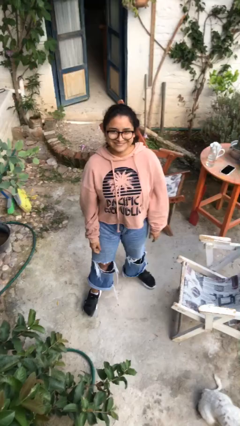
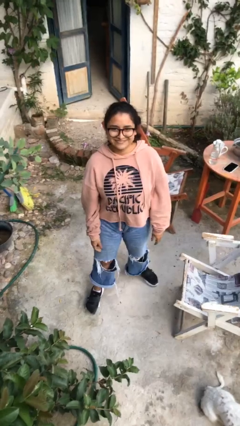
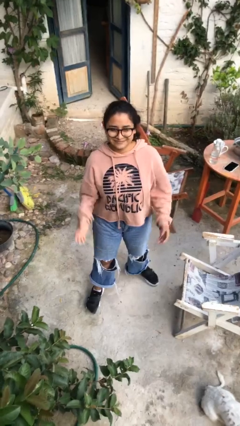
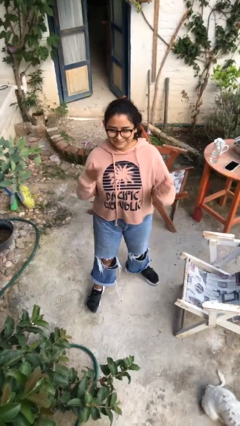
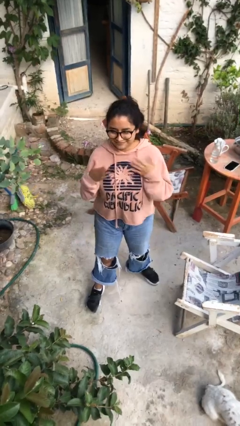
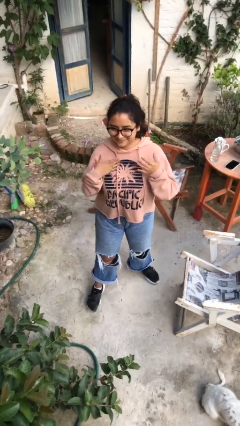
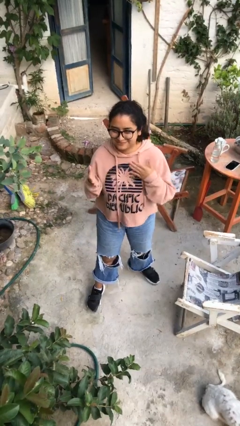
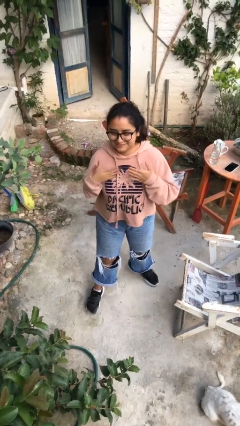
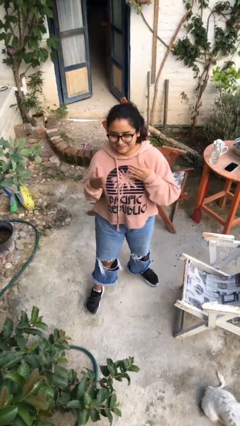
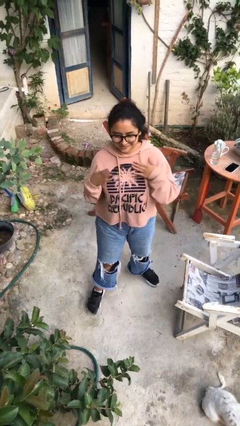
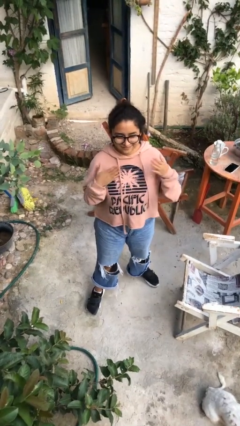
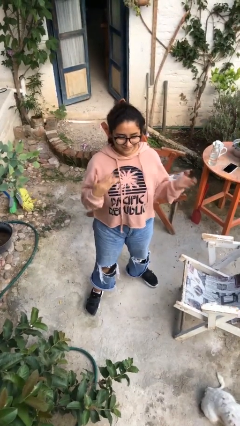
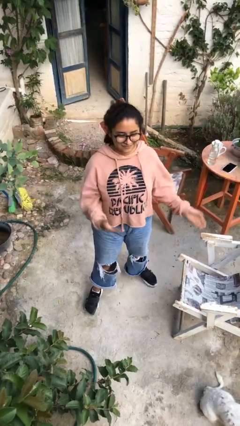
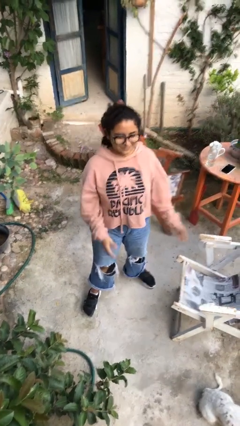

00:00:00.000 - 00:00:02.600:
person drums on chest

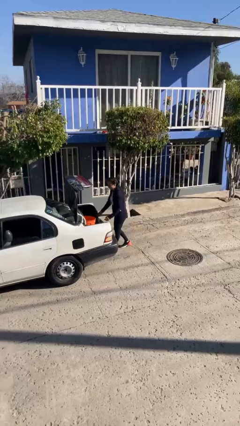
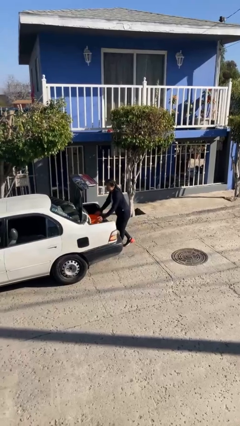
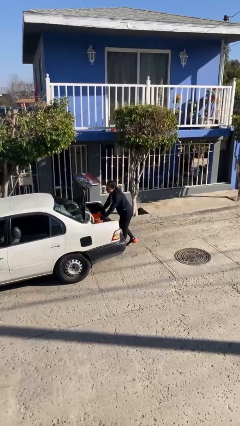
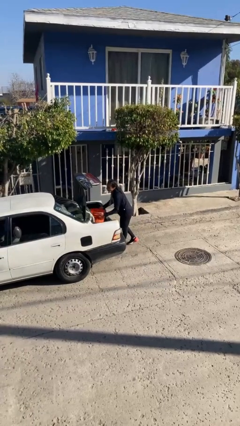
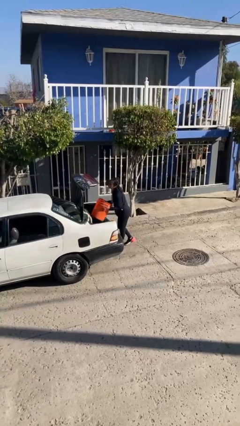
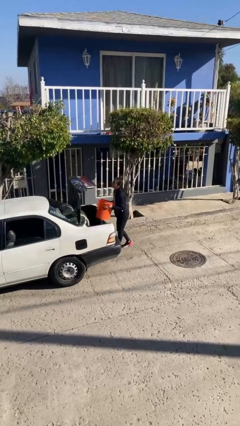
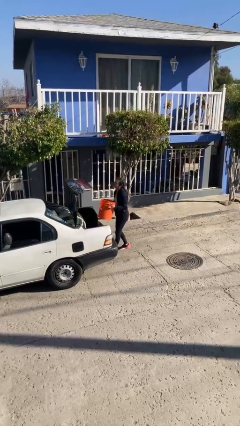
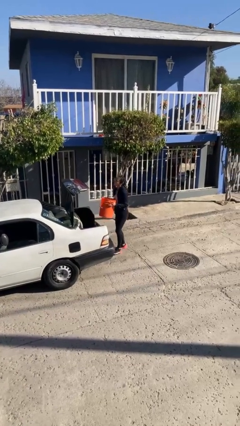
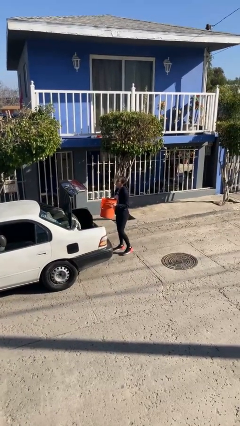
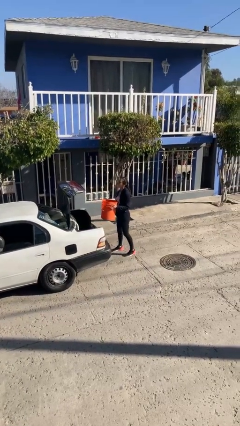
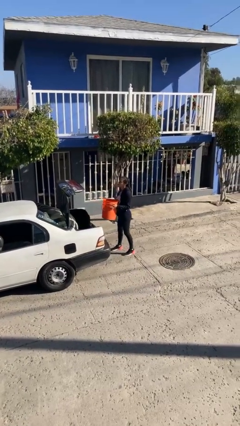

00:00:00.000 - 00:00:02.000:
person unloads car

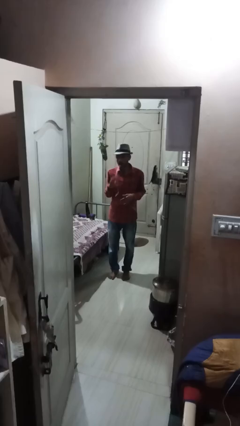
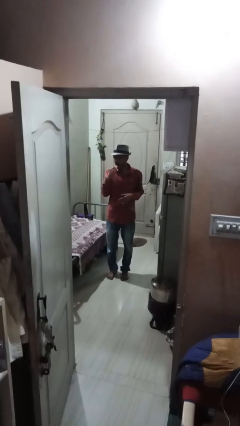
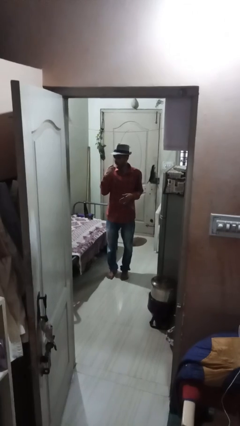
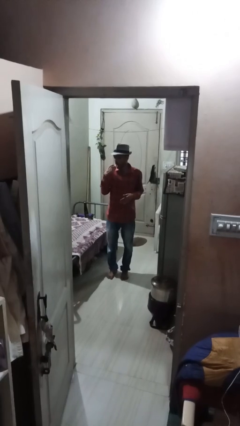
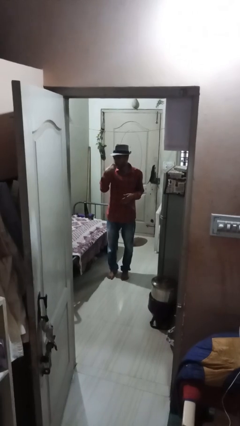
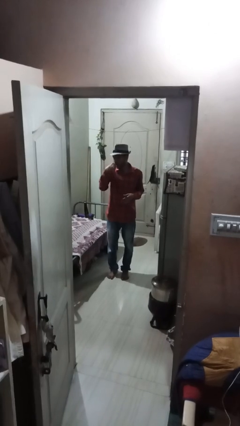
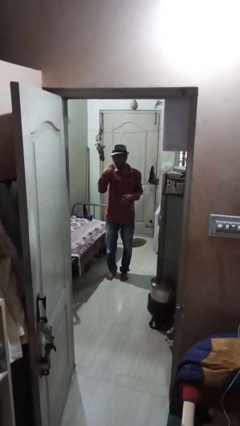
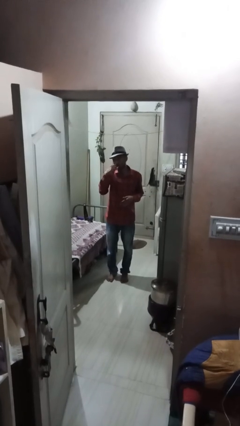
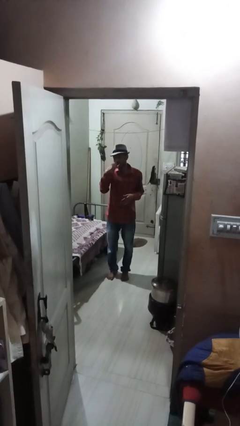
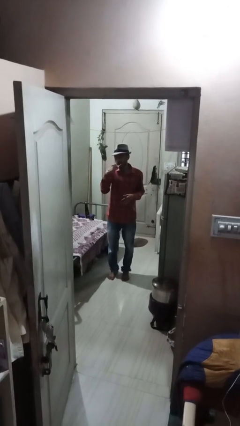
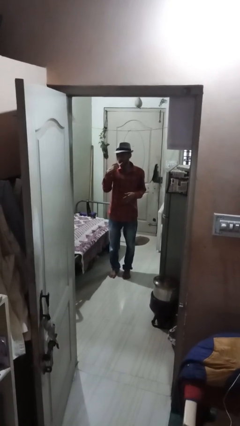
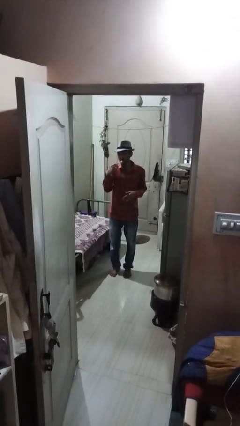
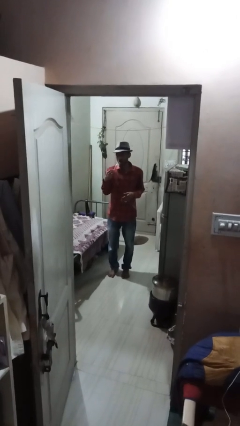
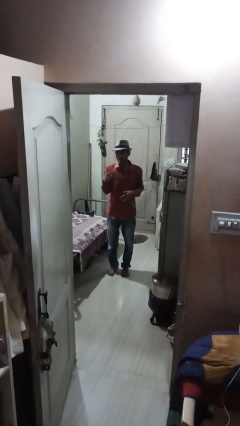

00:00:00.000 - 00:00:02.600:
person brushes teeth

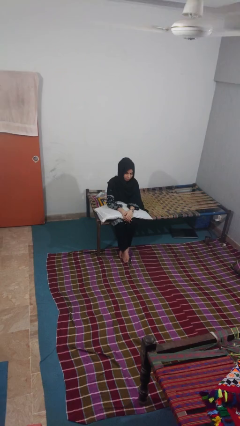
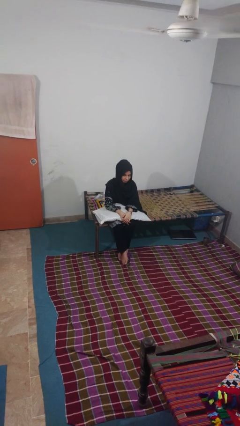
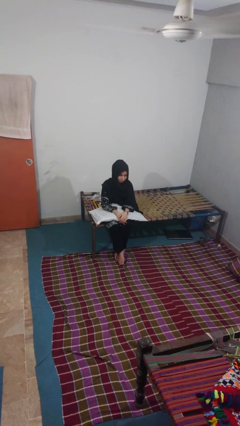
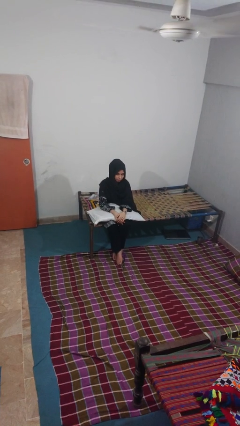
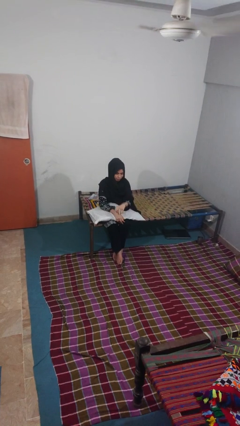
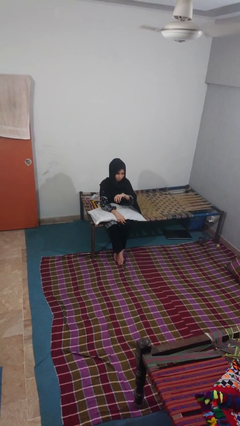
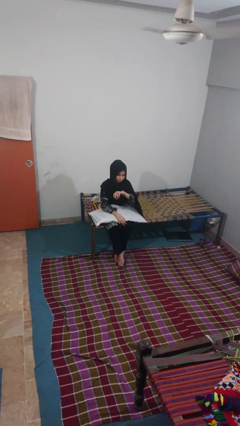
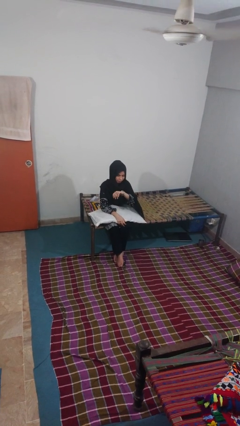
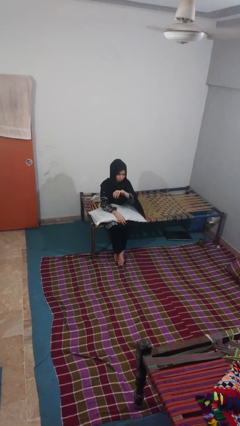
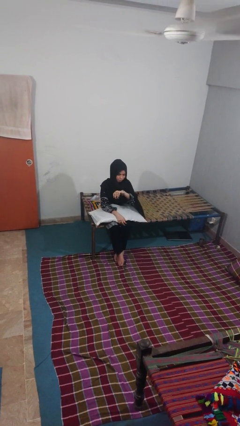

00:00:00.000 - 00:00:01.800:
person looks at wristwatch

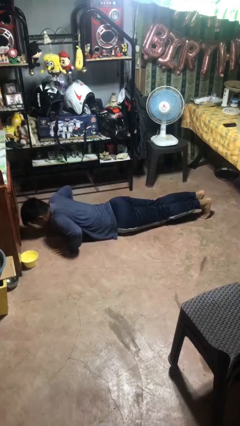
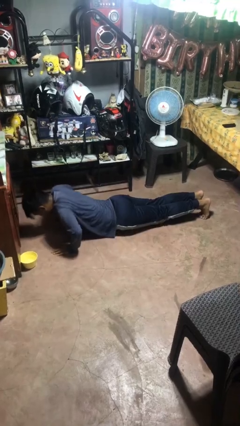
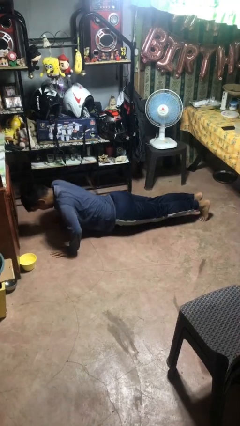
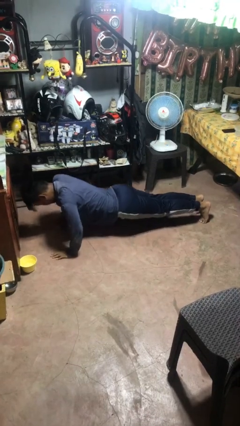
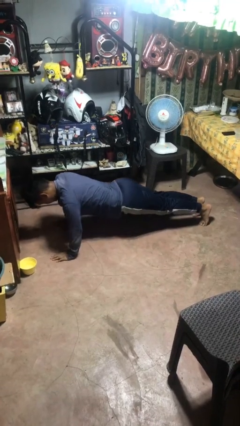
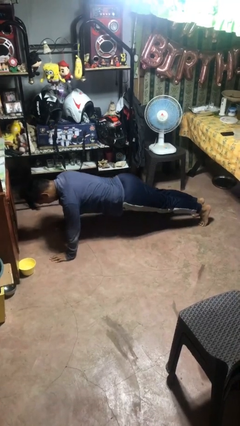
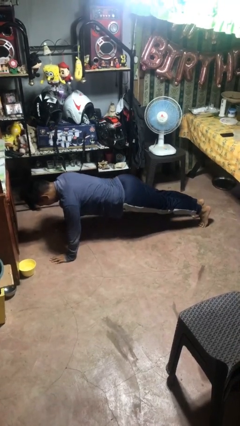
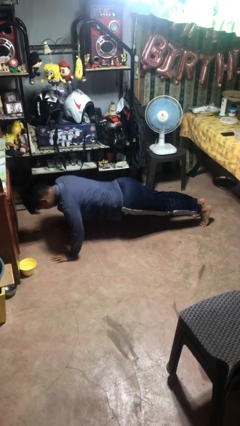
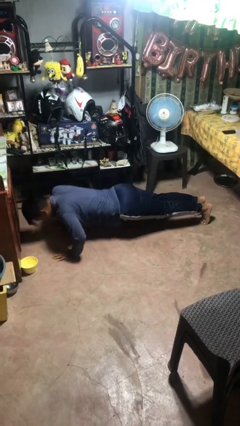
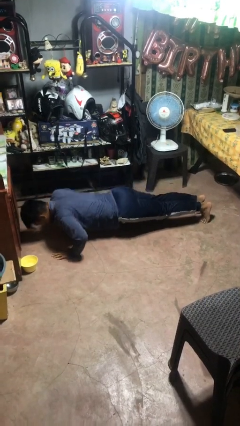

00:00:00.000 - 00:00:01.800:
person exercises with pushup

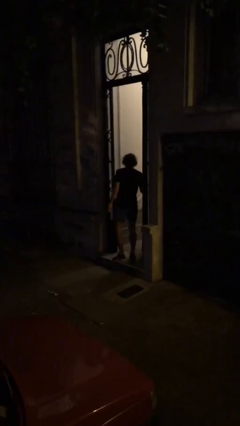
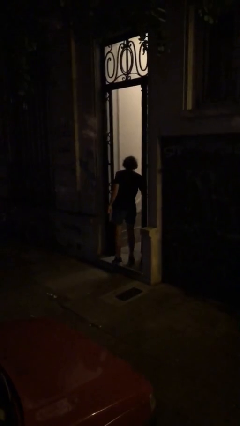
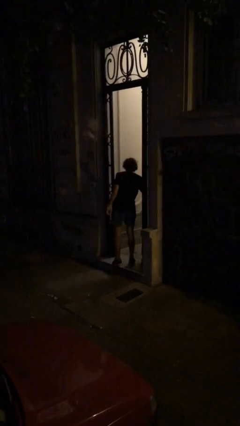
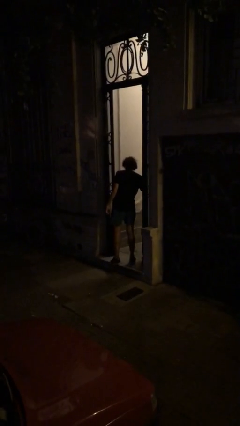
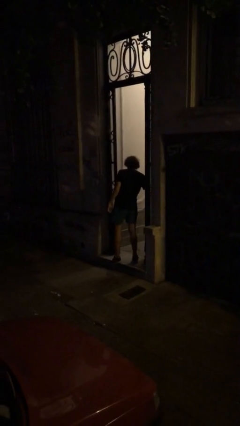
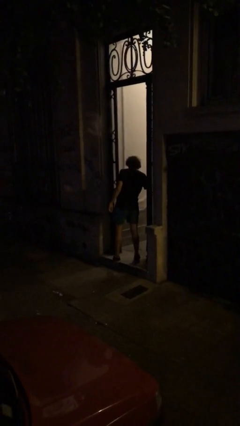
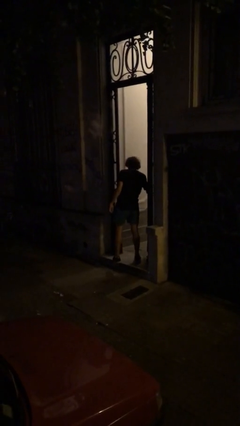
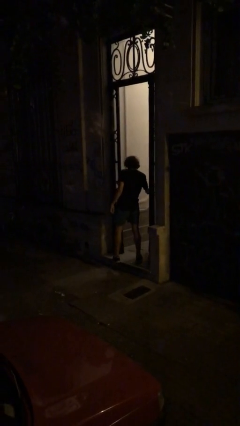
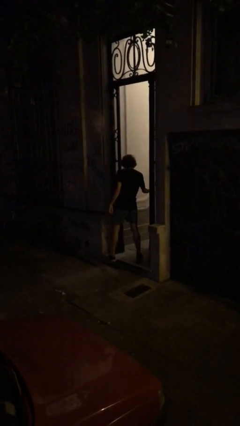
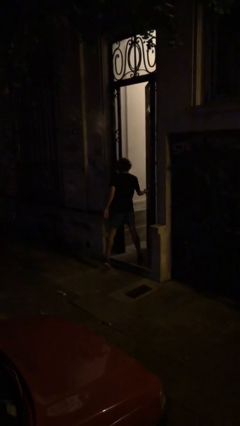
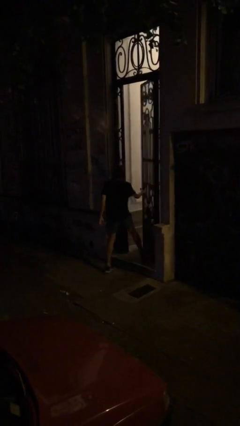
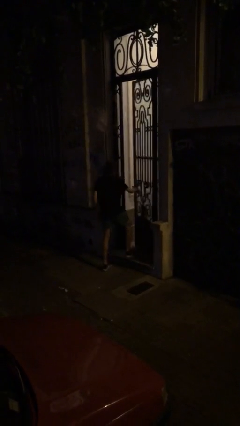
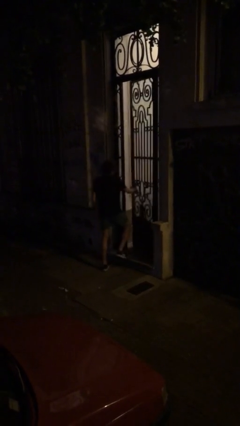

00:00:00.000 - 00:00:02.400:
person closes facility door

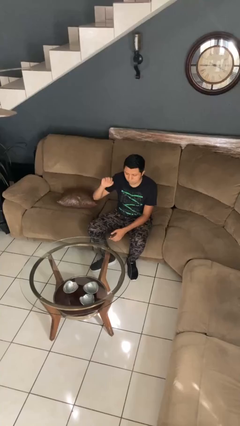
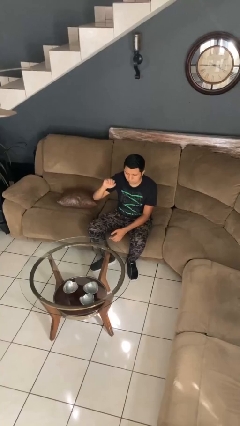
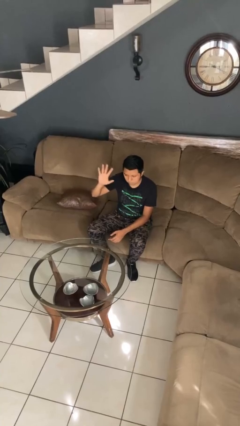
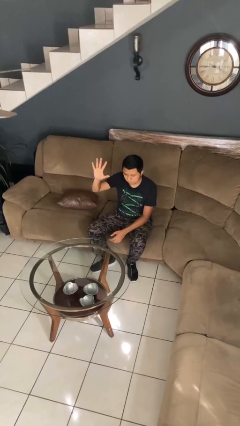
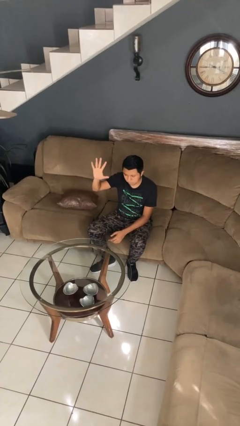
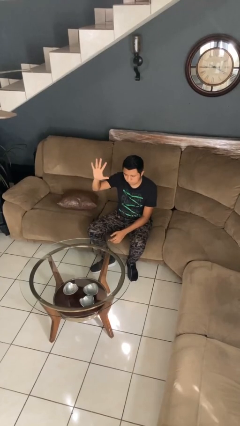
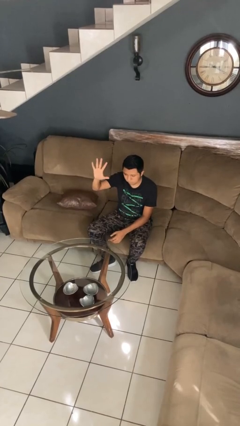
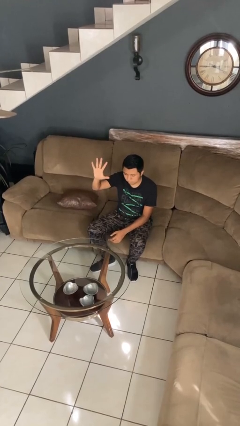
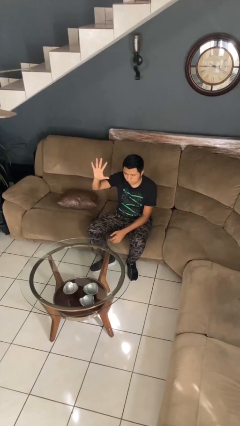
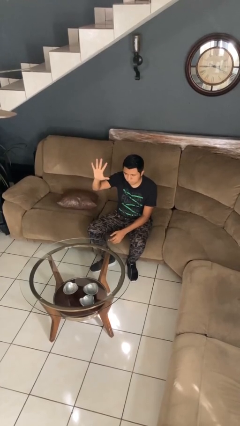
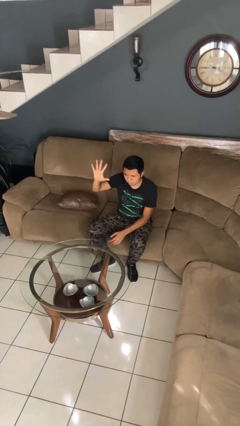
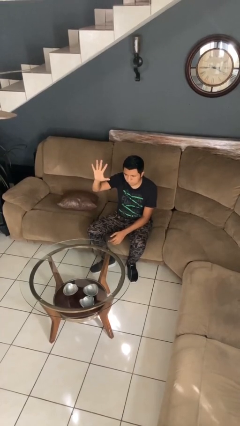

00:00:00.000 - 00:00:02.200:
person gestures number five

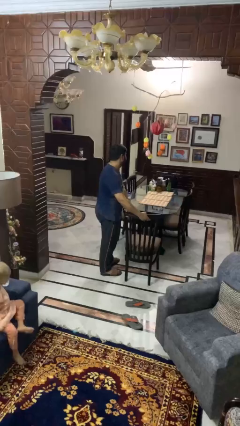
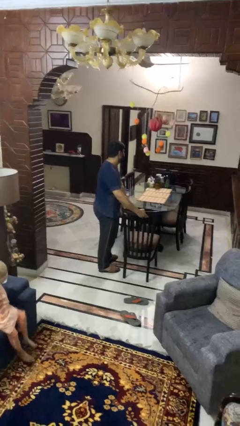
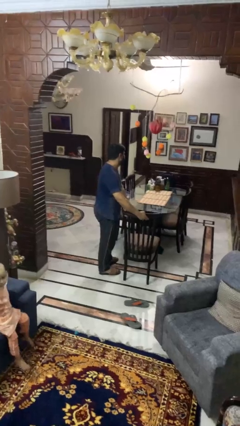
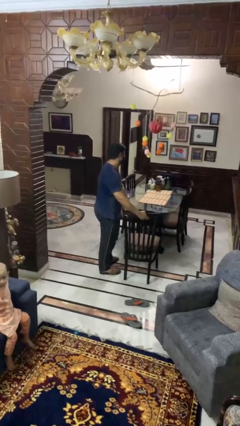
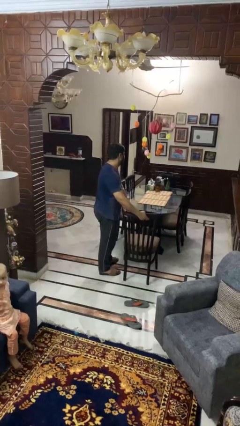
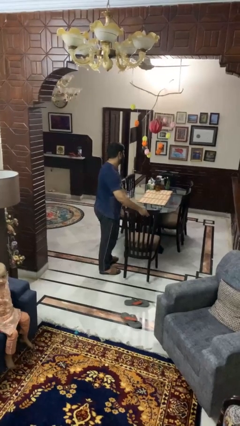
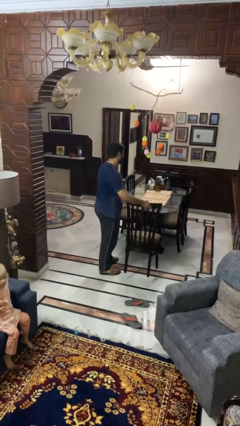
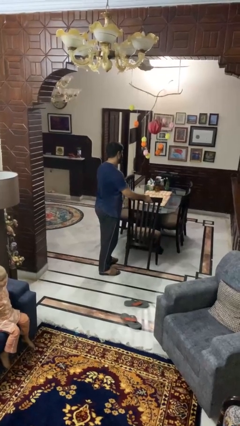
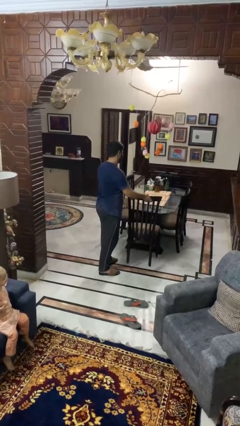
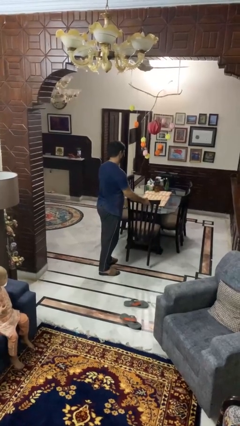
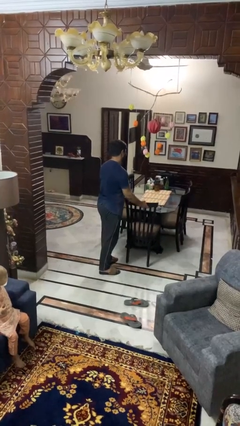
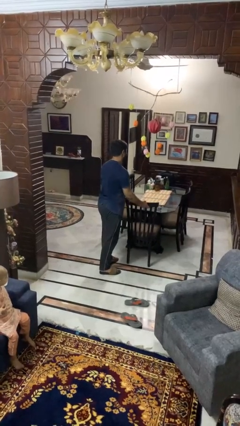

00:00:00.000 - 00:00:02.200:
person pushes in chair
